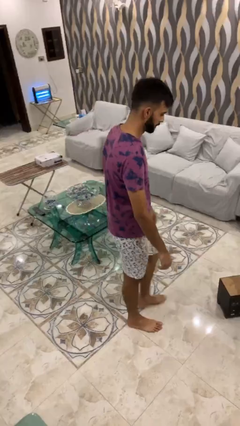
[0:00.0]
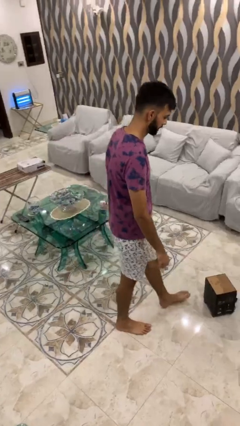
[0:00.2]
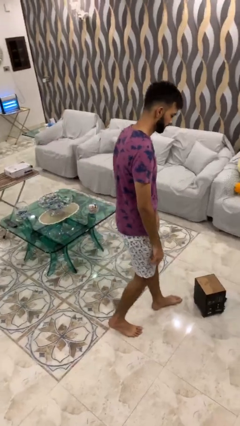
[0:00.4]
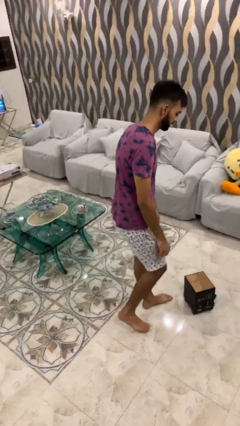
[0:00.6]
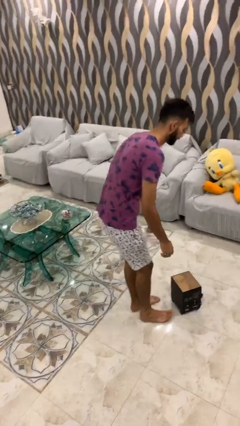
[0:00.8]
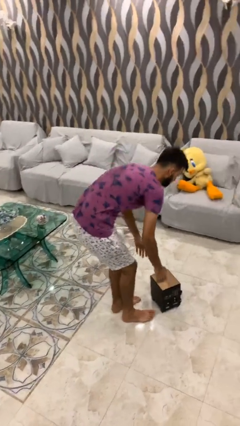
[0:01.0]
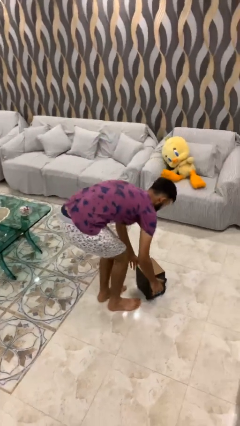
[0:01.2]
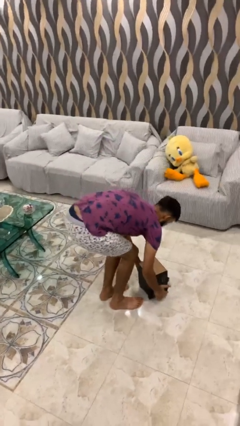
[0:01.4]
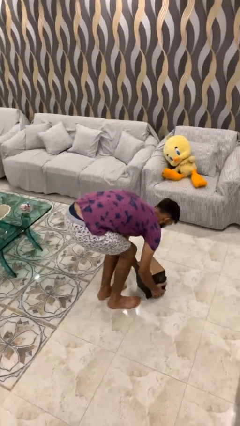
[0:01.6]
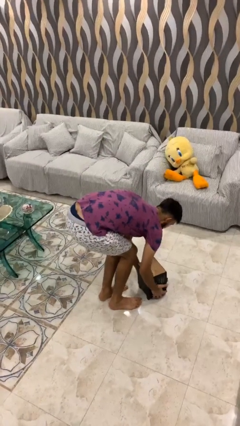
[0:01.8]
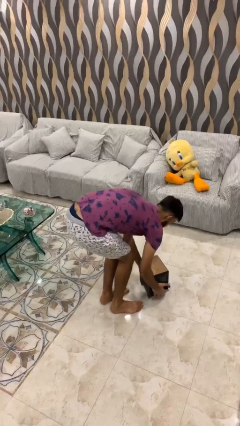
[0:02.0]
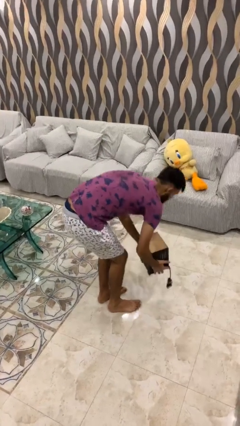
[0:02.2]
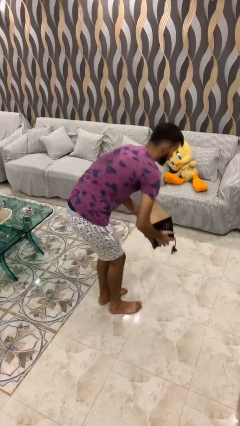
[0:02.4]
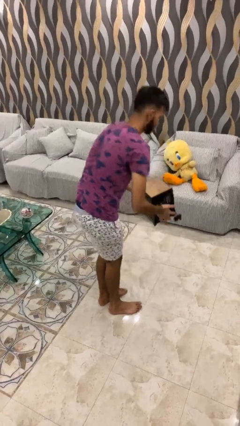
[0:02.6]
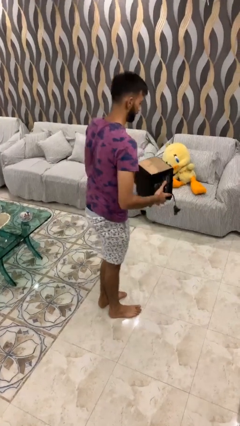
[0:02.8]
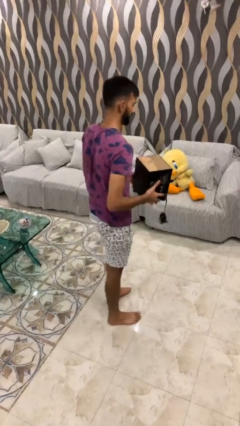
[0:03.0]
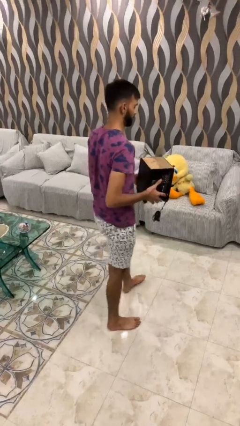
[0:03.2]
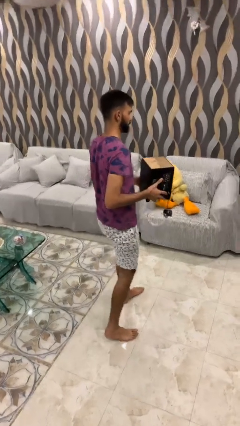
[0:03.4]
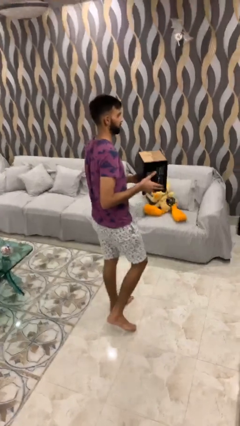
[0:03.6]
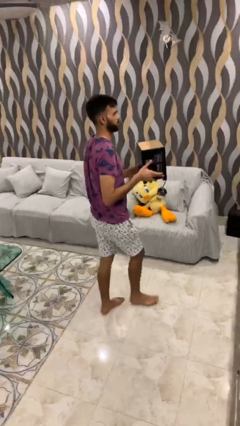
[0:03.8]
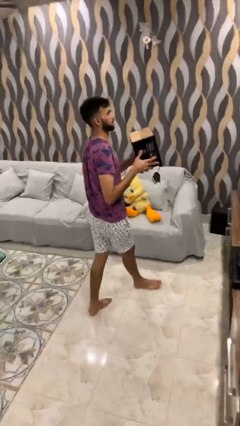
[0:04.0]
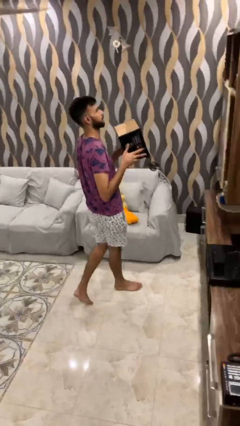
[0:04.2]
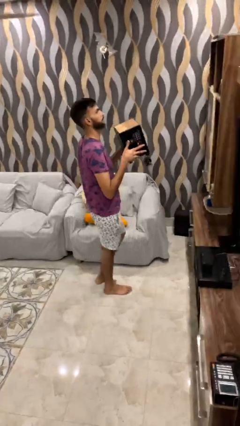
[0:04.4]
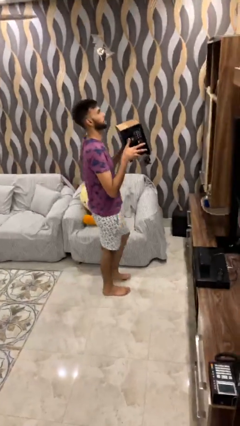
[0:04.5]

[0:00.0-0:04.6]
person picks up object from floor

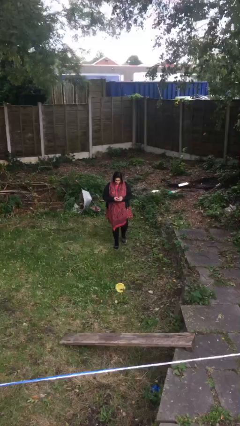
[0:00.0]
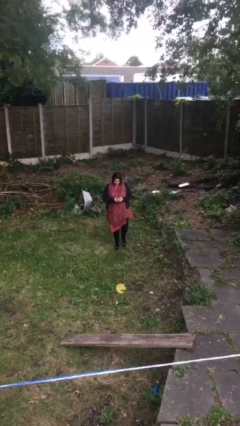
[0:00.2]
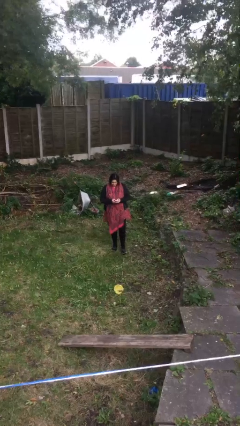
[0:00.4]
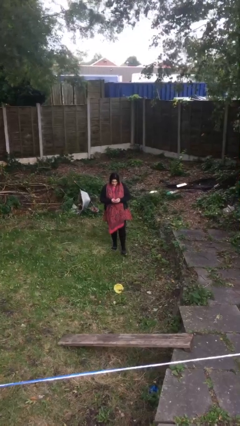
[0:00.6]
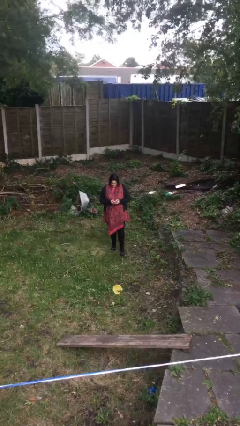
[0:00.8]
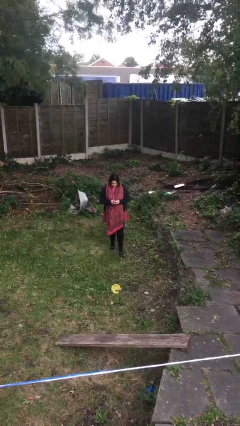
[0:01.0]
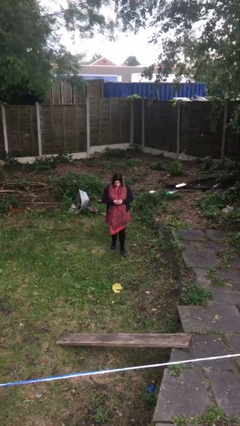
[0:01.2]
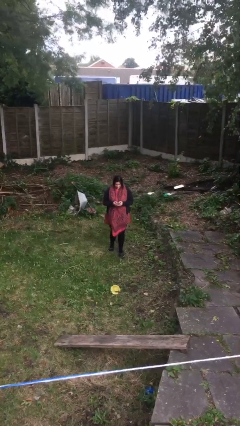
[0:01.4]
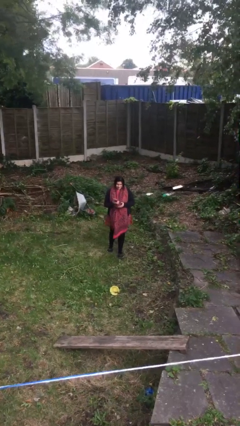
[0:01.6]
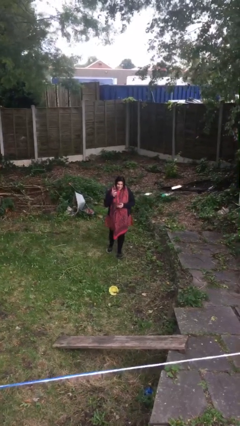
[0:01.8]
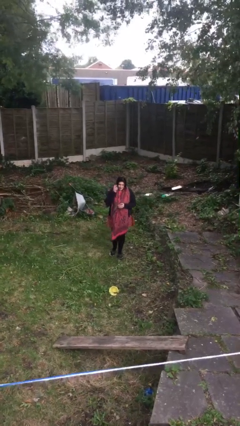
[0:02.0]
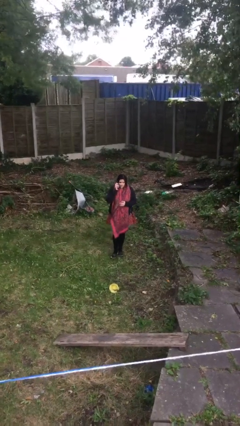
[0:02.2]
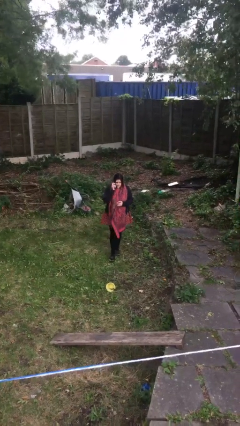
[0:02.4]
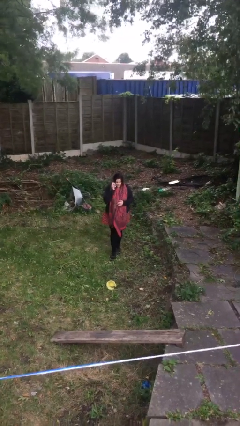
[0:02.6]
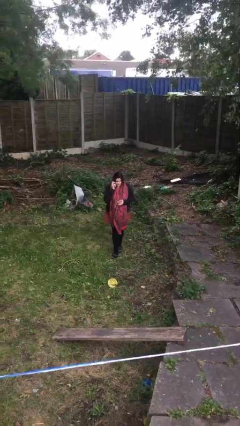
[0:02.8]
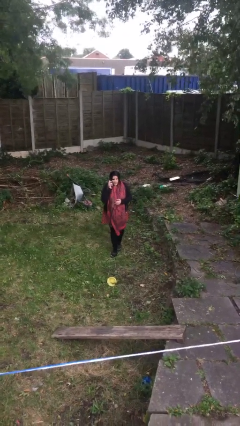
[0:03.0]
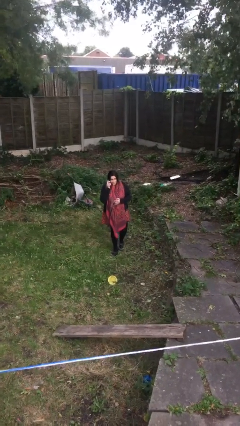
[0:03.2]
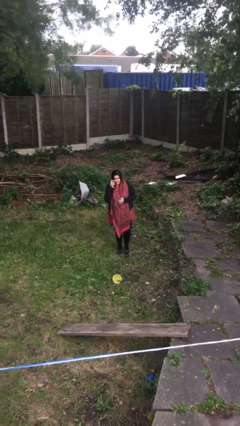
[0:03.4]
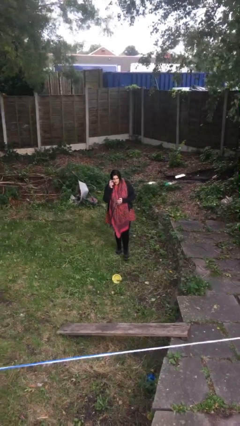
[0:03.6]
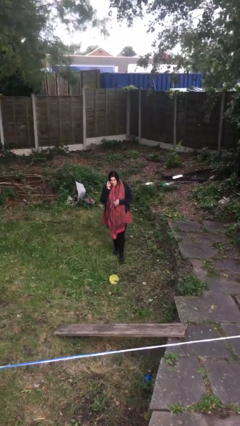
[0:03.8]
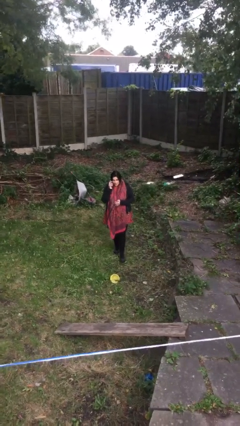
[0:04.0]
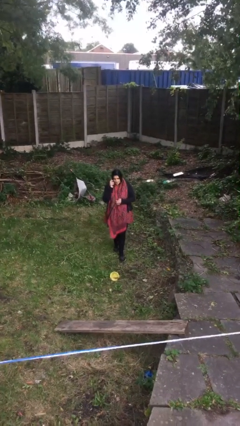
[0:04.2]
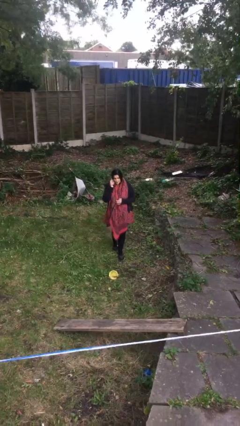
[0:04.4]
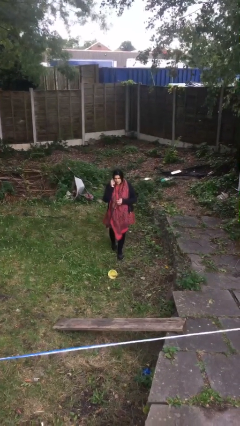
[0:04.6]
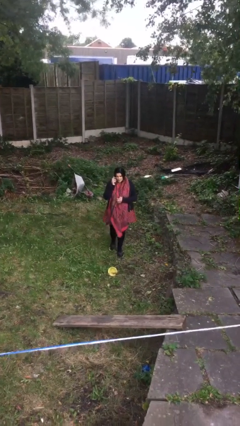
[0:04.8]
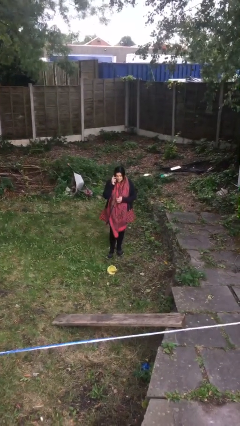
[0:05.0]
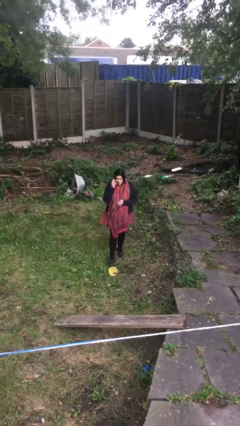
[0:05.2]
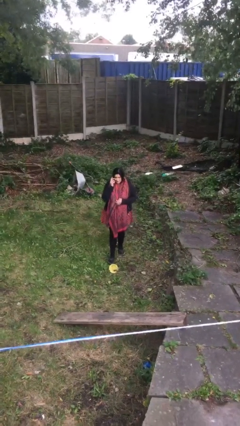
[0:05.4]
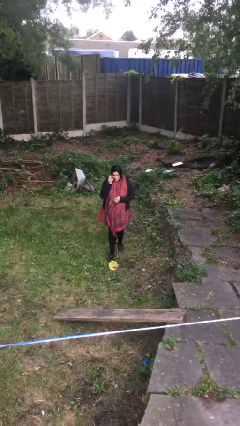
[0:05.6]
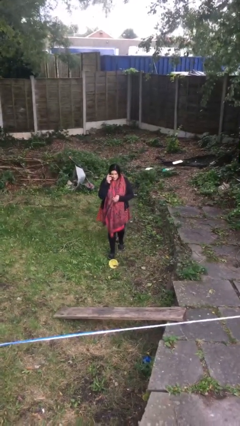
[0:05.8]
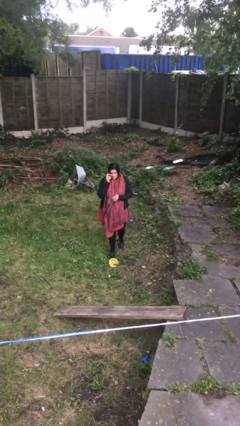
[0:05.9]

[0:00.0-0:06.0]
person talks on phone

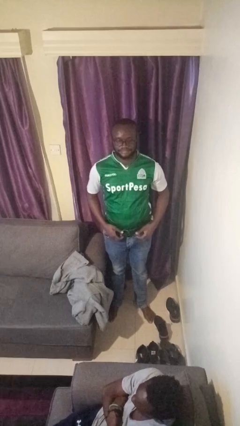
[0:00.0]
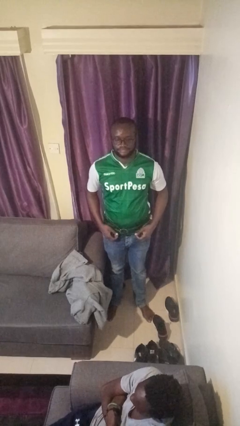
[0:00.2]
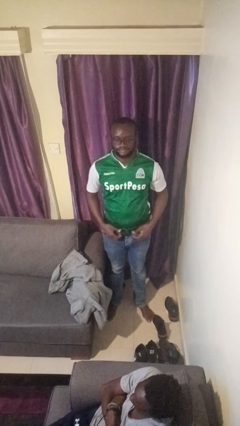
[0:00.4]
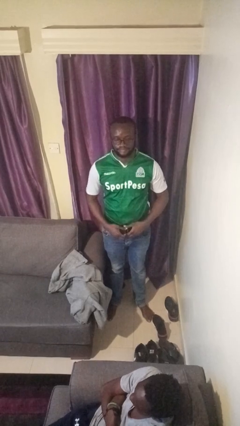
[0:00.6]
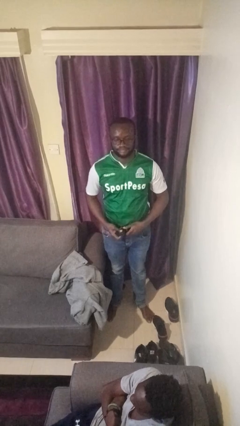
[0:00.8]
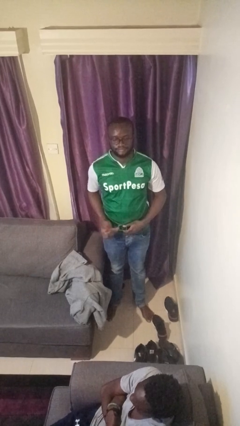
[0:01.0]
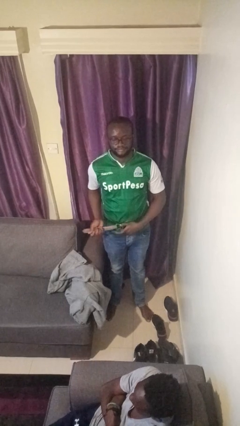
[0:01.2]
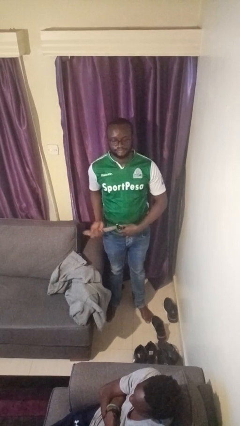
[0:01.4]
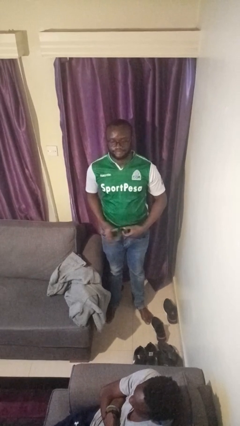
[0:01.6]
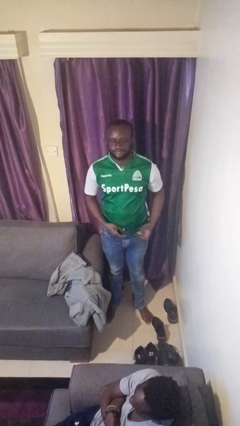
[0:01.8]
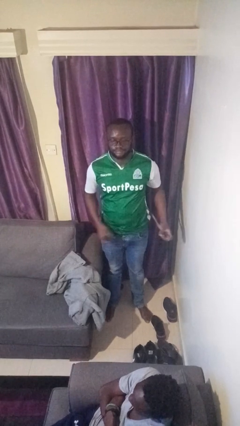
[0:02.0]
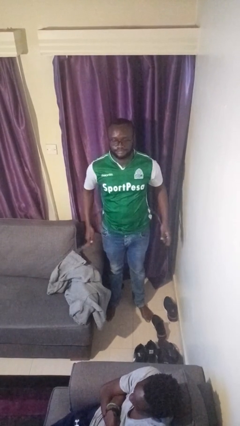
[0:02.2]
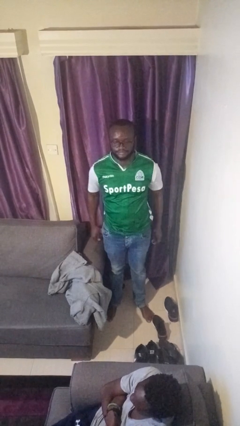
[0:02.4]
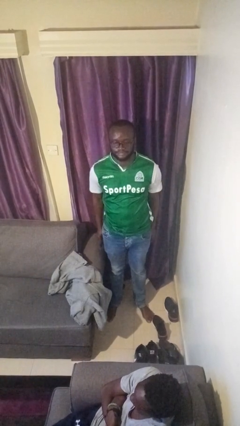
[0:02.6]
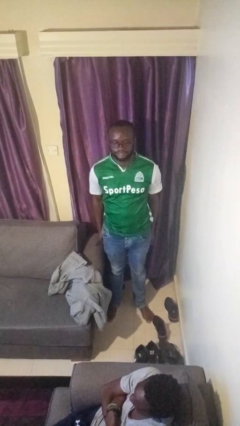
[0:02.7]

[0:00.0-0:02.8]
person takes off belt

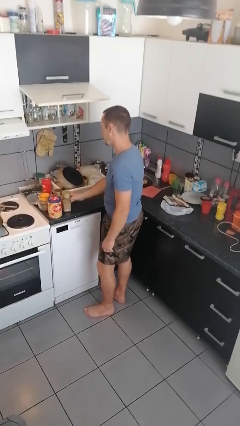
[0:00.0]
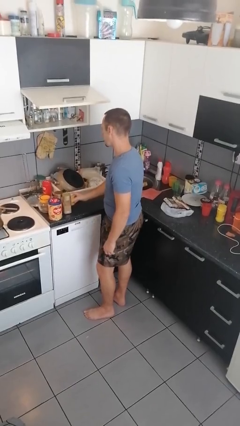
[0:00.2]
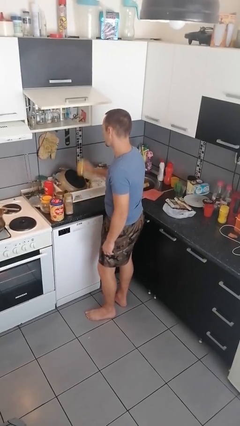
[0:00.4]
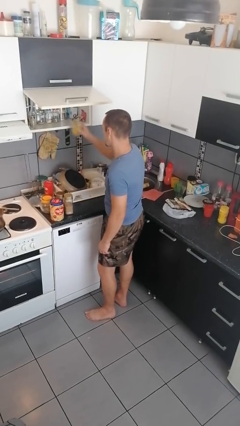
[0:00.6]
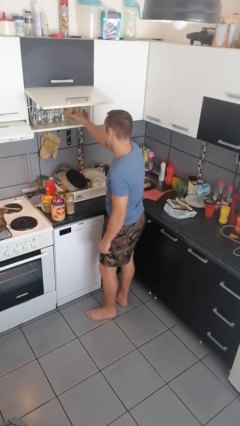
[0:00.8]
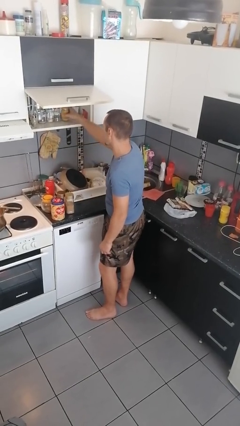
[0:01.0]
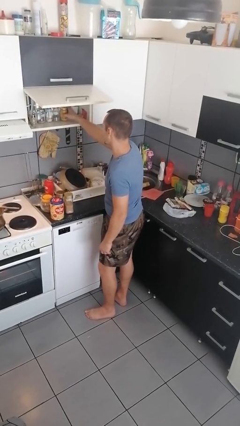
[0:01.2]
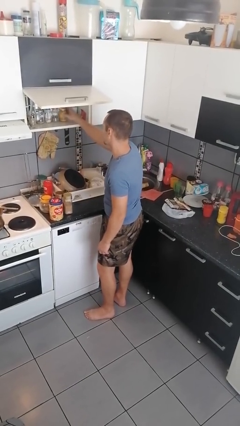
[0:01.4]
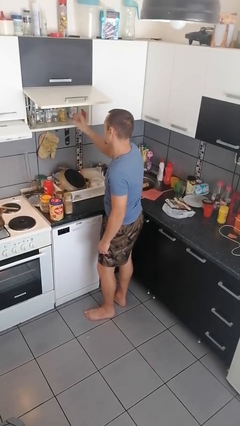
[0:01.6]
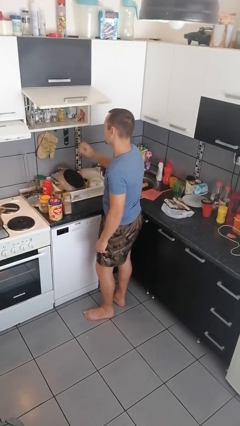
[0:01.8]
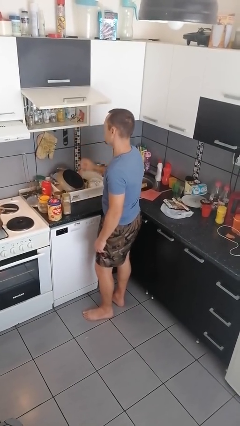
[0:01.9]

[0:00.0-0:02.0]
person loads groceries into cabinet

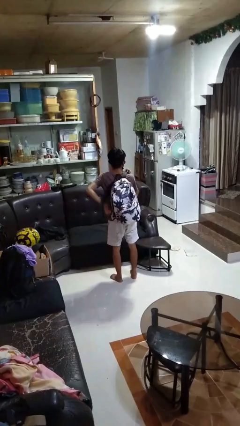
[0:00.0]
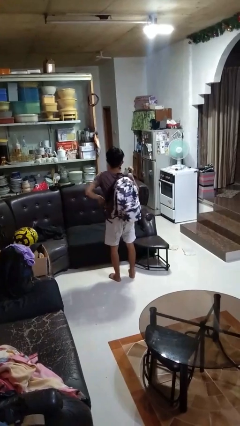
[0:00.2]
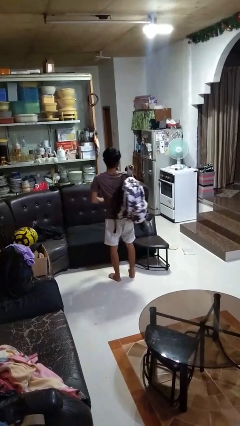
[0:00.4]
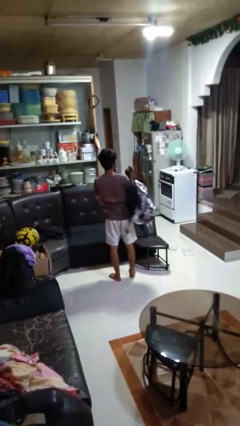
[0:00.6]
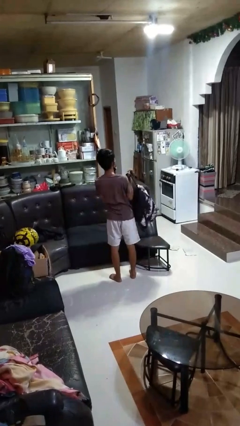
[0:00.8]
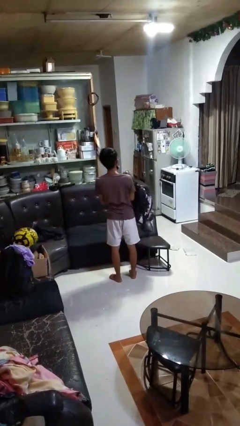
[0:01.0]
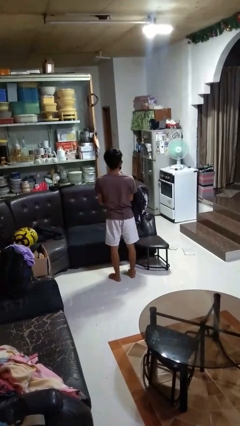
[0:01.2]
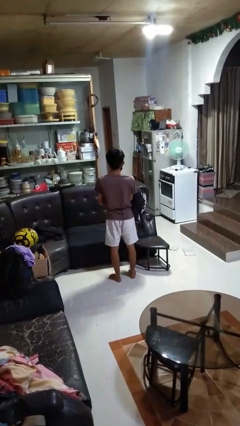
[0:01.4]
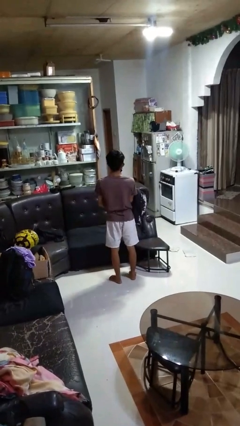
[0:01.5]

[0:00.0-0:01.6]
person puts on backpack
